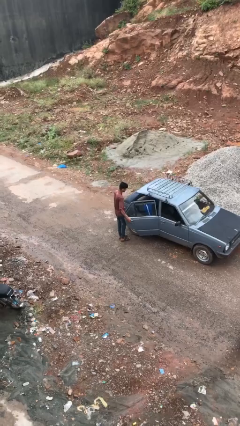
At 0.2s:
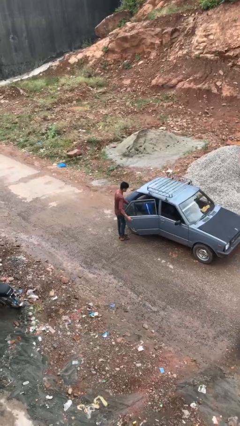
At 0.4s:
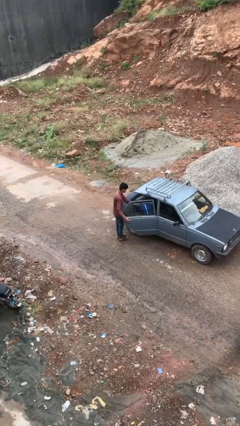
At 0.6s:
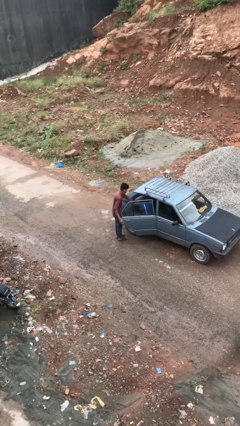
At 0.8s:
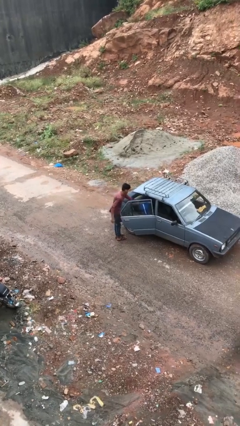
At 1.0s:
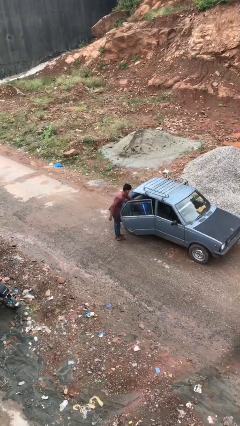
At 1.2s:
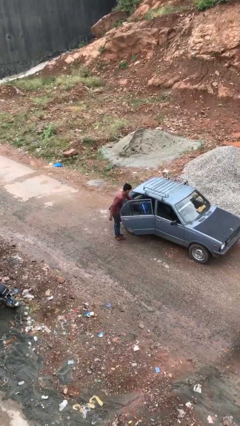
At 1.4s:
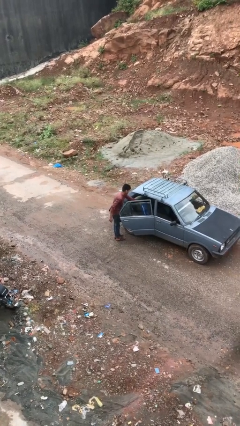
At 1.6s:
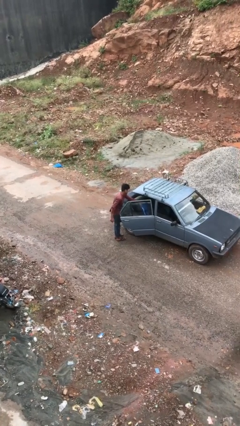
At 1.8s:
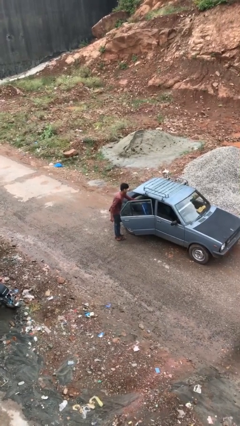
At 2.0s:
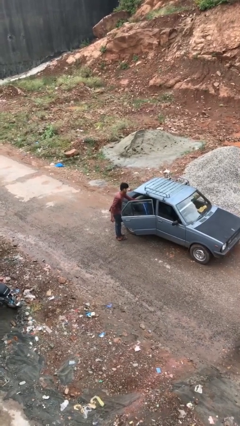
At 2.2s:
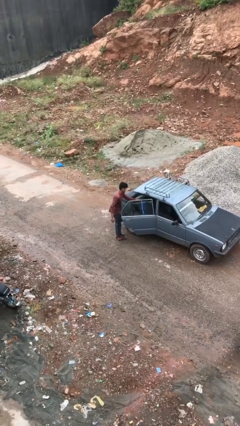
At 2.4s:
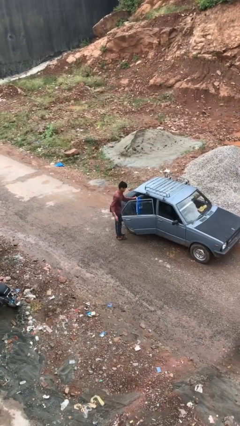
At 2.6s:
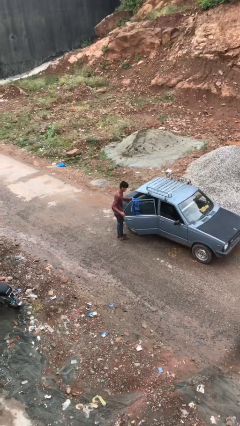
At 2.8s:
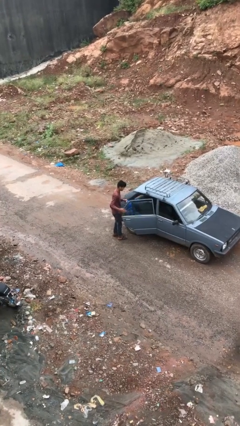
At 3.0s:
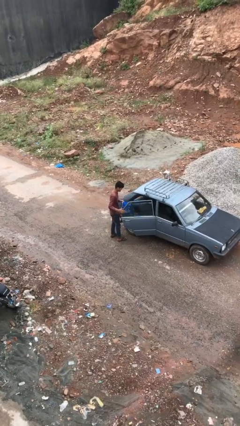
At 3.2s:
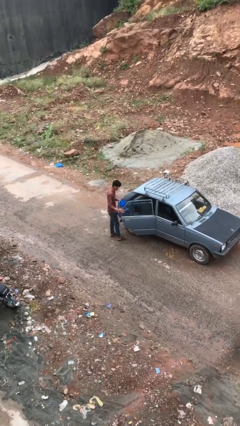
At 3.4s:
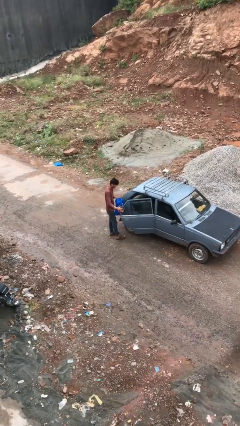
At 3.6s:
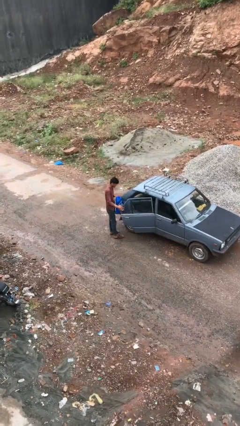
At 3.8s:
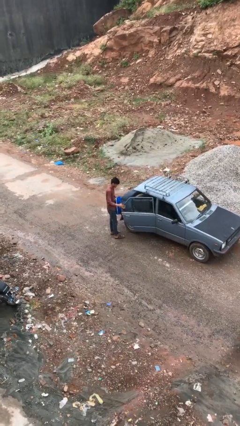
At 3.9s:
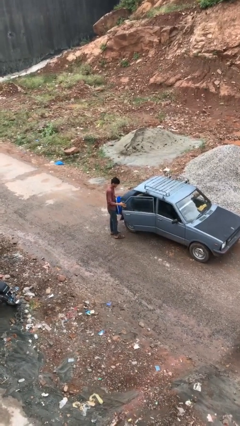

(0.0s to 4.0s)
person unloads car

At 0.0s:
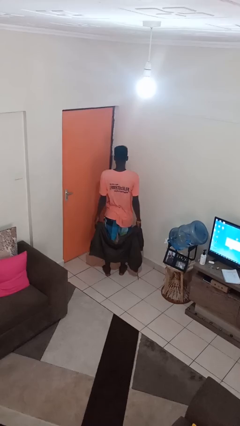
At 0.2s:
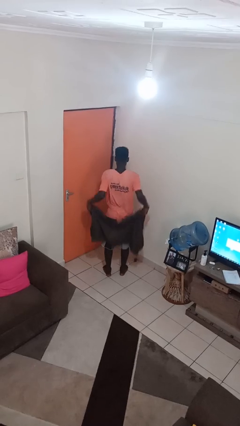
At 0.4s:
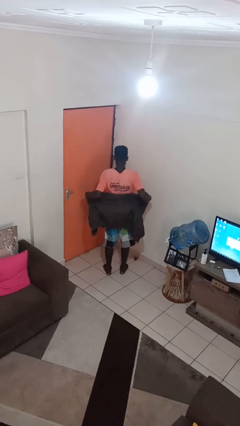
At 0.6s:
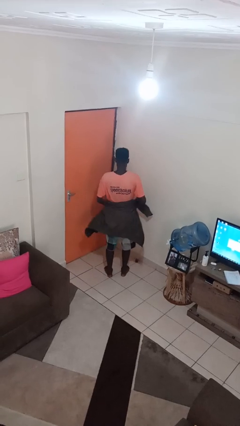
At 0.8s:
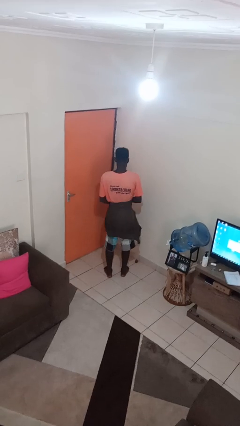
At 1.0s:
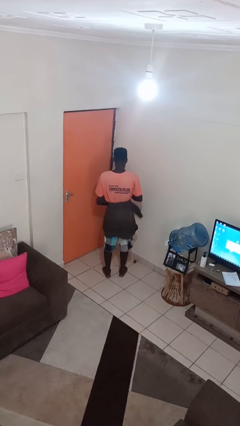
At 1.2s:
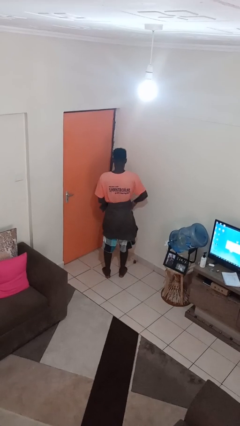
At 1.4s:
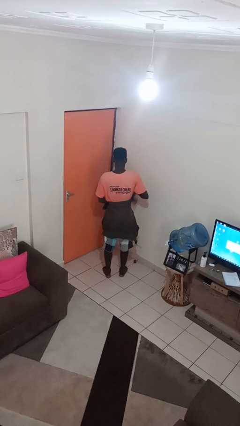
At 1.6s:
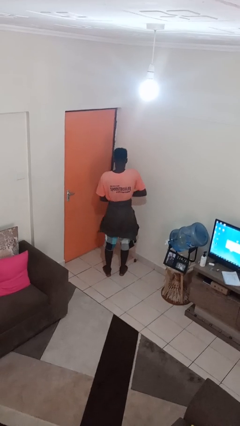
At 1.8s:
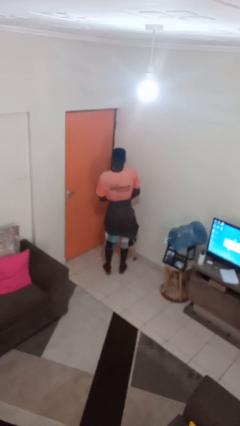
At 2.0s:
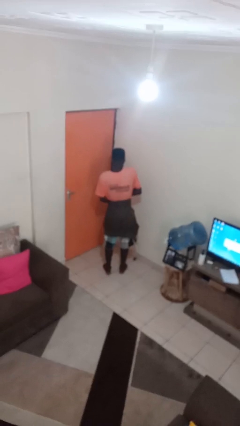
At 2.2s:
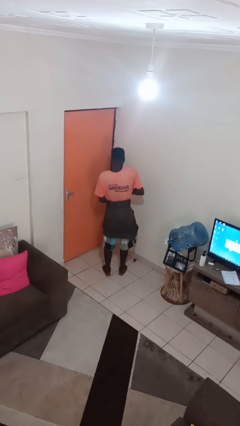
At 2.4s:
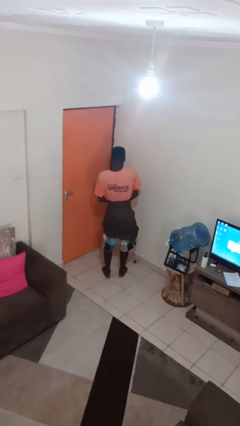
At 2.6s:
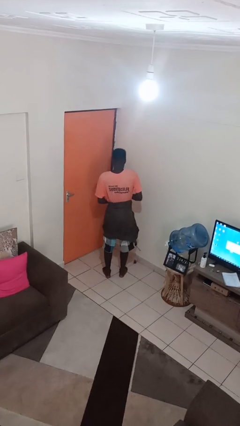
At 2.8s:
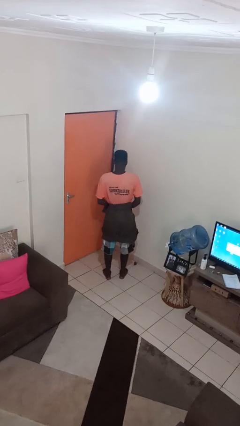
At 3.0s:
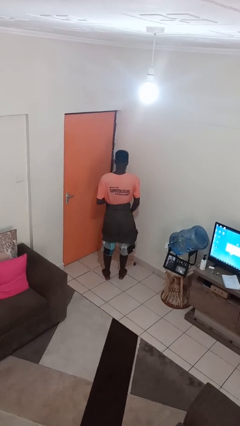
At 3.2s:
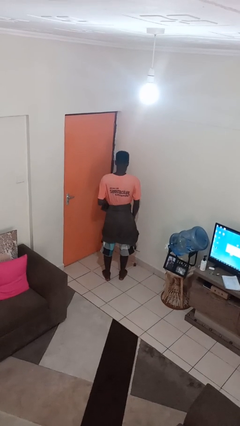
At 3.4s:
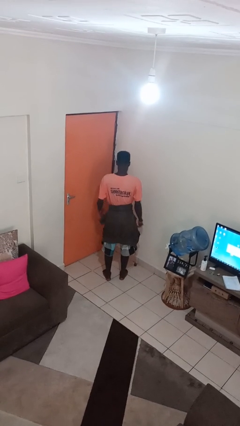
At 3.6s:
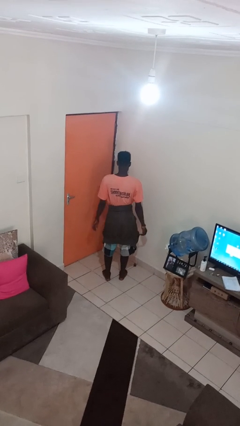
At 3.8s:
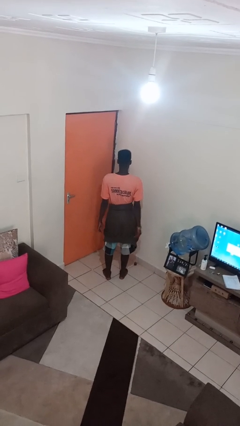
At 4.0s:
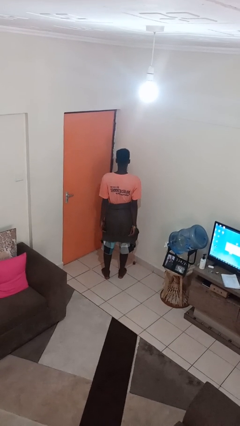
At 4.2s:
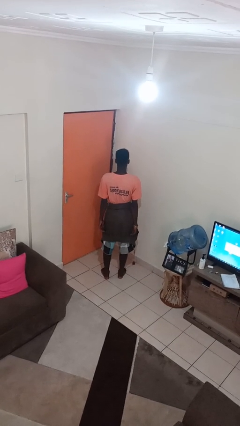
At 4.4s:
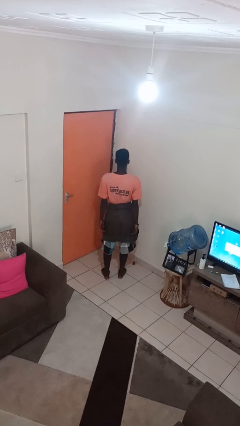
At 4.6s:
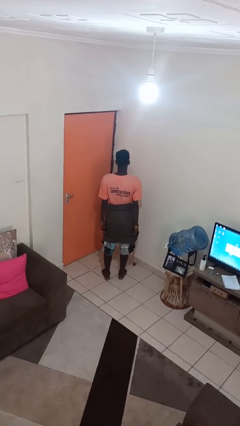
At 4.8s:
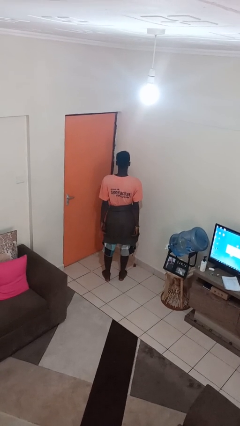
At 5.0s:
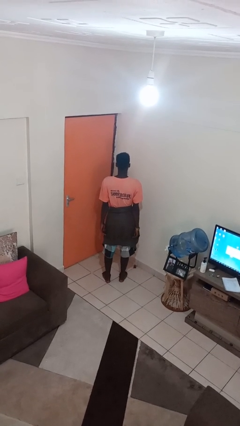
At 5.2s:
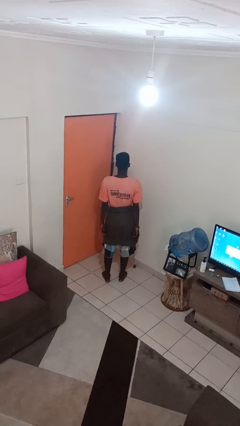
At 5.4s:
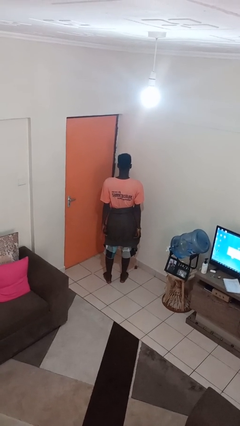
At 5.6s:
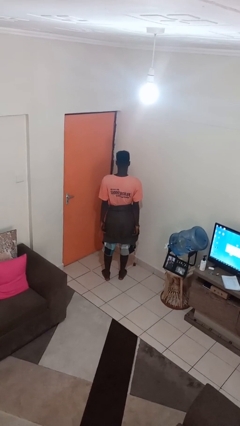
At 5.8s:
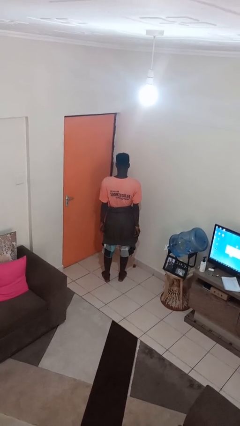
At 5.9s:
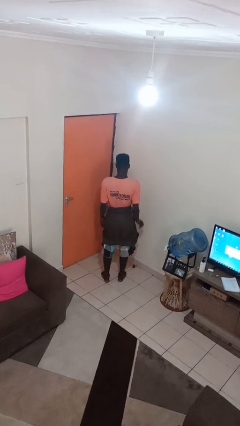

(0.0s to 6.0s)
person ties jacket around waist

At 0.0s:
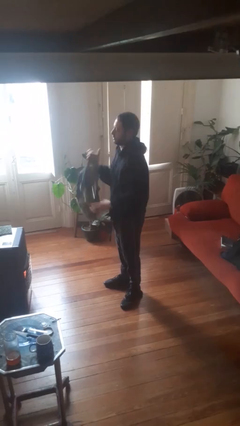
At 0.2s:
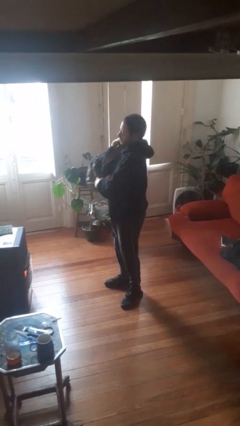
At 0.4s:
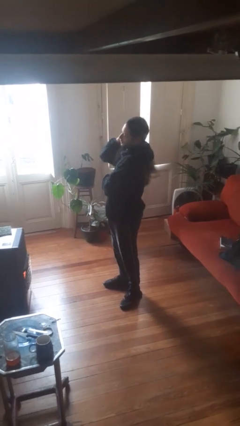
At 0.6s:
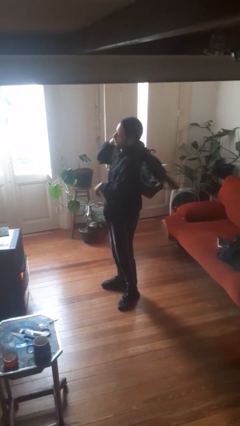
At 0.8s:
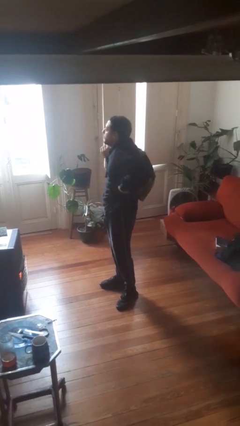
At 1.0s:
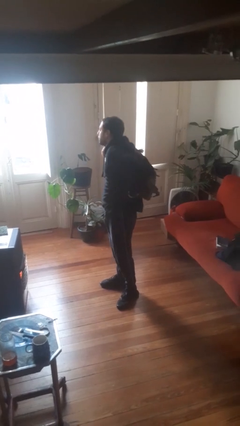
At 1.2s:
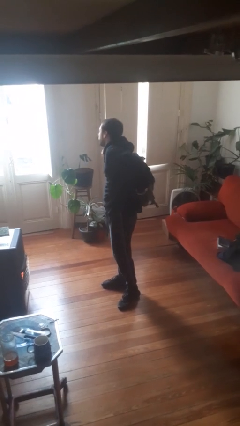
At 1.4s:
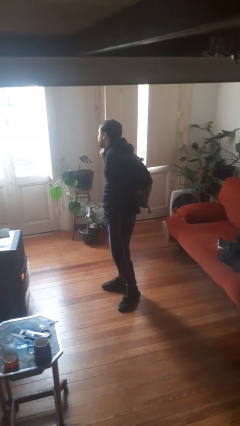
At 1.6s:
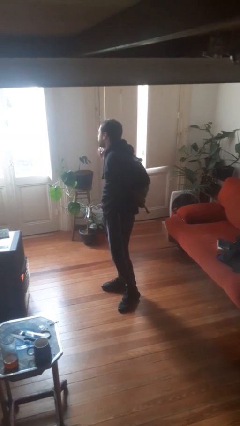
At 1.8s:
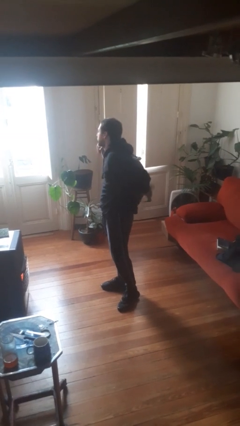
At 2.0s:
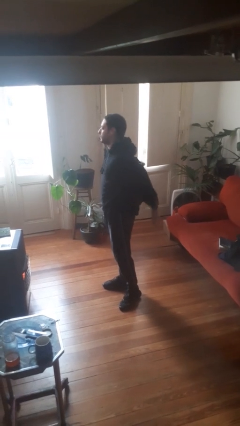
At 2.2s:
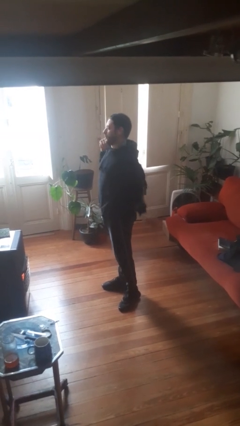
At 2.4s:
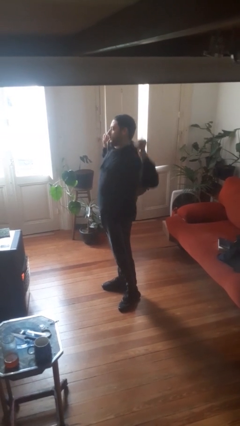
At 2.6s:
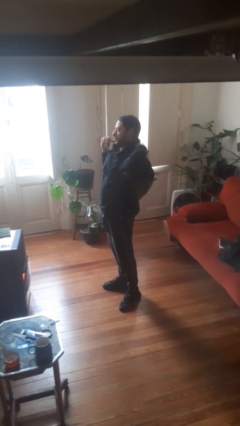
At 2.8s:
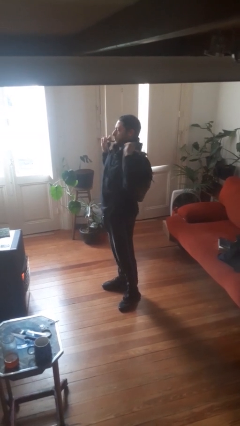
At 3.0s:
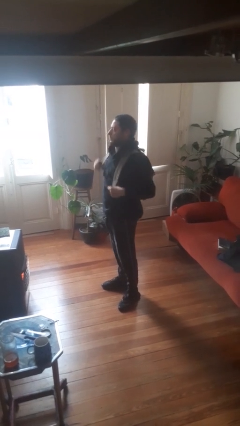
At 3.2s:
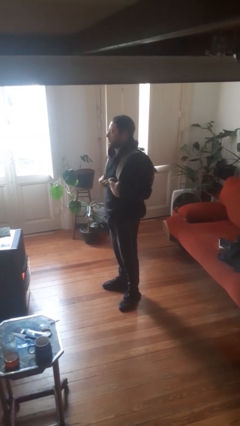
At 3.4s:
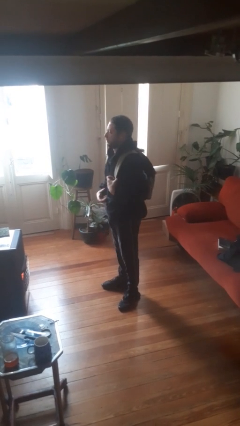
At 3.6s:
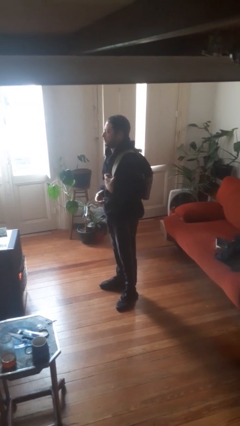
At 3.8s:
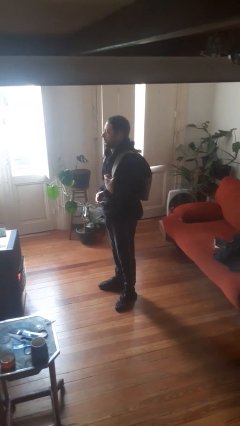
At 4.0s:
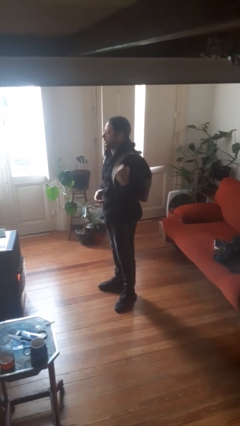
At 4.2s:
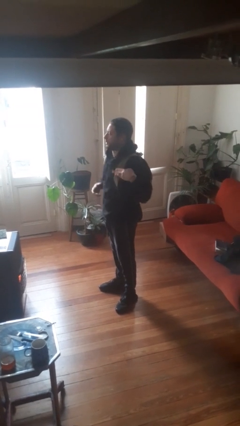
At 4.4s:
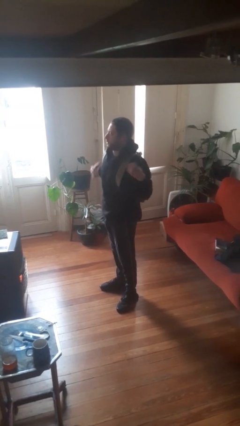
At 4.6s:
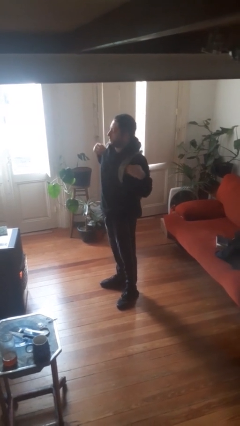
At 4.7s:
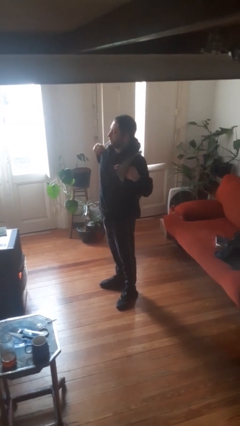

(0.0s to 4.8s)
person puts on backpack

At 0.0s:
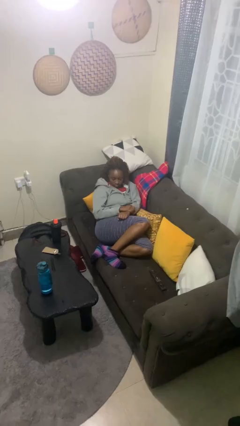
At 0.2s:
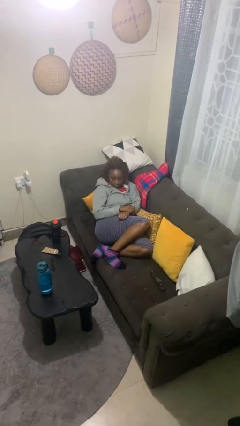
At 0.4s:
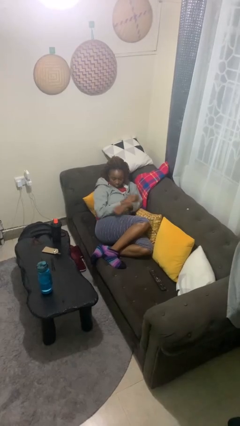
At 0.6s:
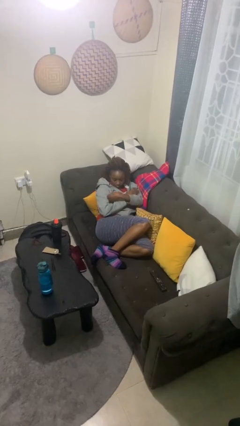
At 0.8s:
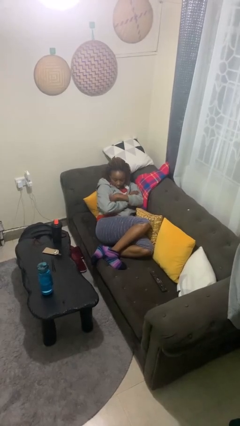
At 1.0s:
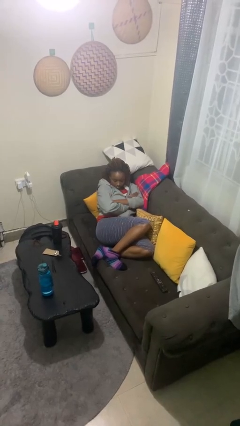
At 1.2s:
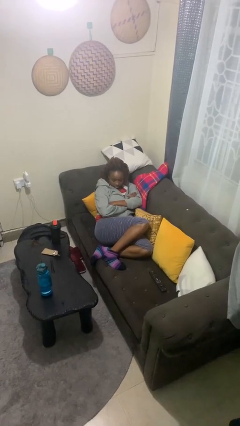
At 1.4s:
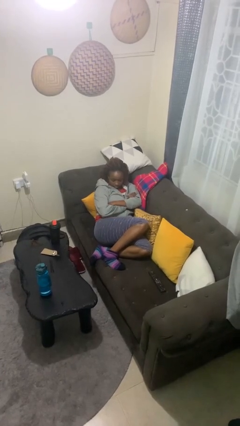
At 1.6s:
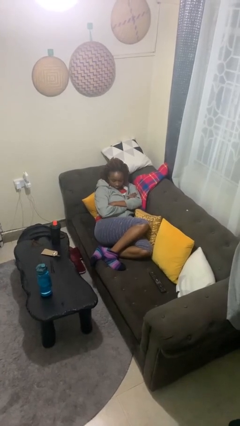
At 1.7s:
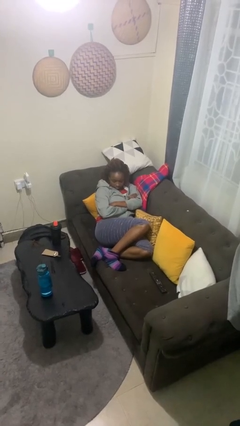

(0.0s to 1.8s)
person crosses arms

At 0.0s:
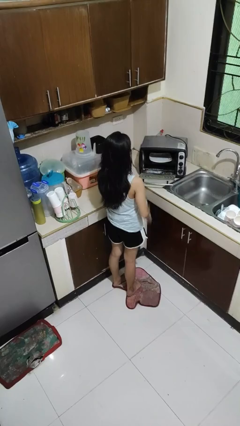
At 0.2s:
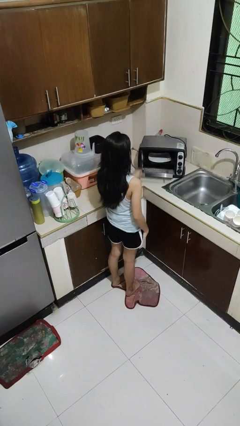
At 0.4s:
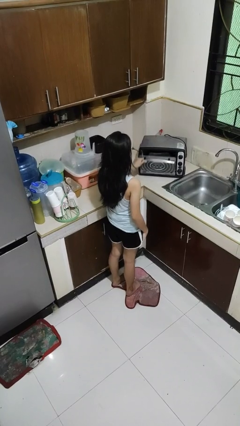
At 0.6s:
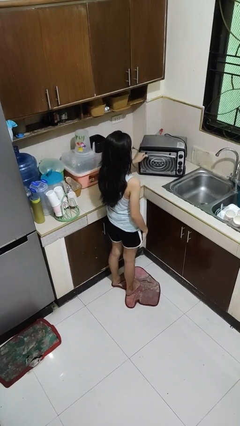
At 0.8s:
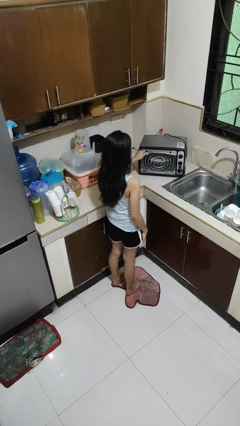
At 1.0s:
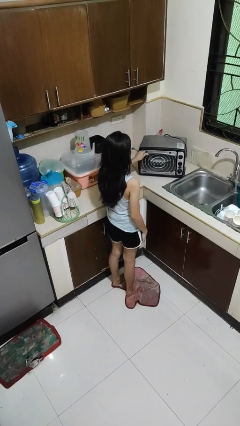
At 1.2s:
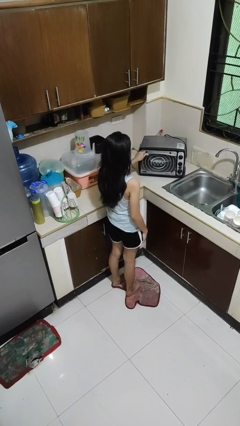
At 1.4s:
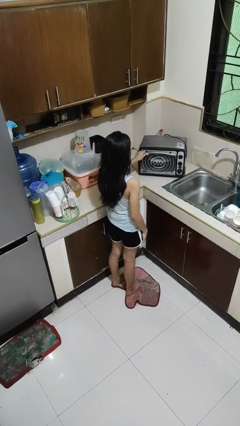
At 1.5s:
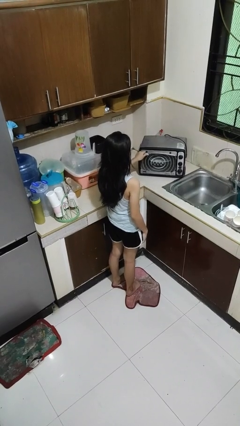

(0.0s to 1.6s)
person closes microwave
